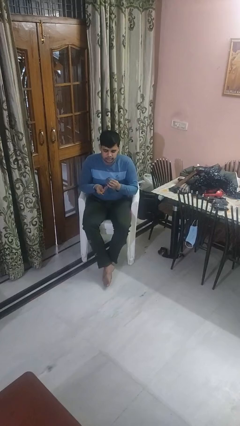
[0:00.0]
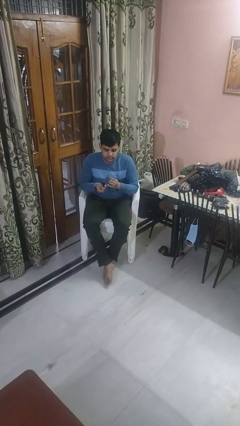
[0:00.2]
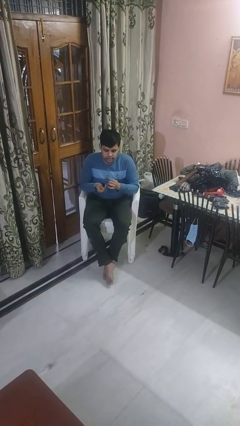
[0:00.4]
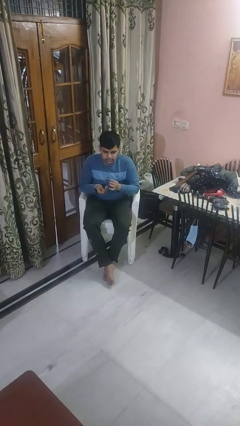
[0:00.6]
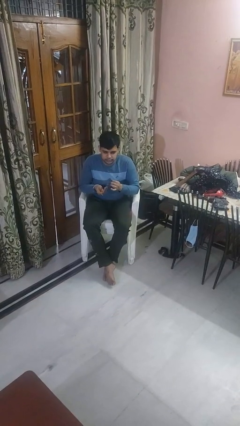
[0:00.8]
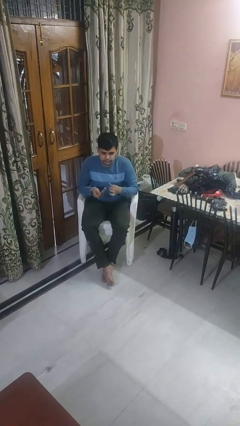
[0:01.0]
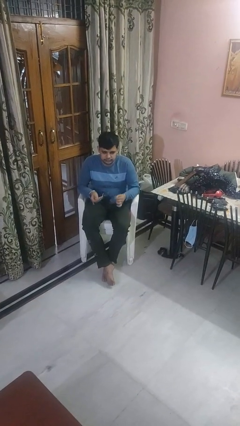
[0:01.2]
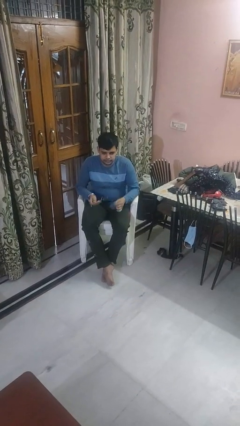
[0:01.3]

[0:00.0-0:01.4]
person cleans eyeglasses

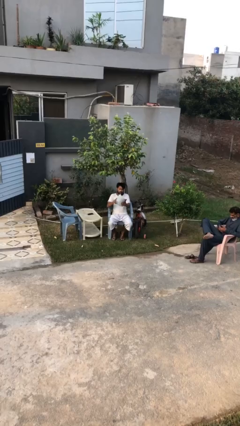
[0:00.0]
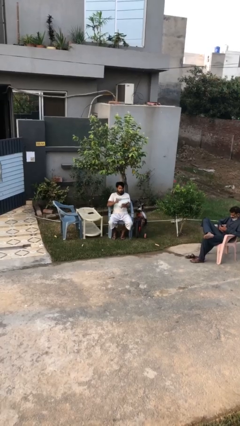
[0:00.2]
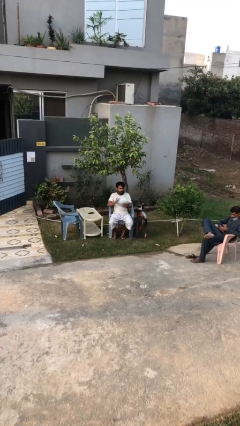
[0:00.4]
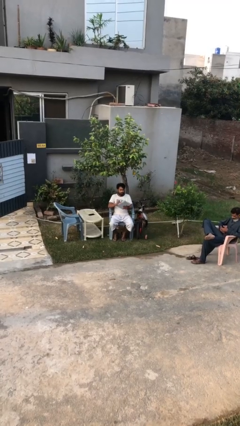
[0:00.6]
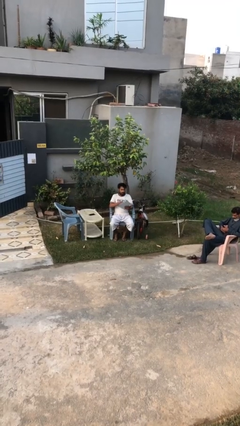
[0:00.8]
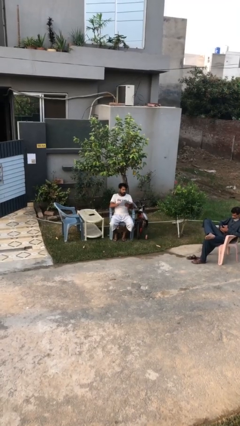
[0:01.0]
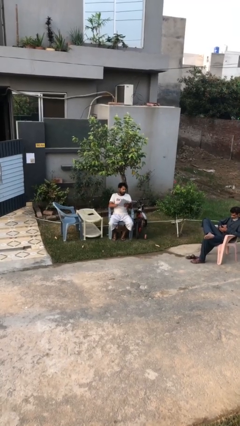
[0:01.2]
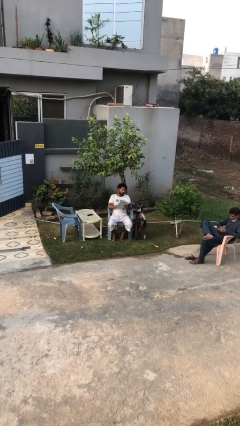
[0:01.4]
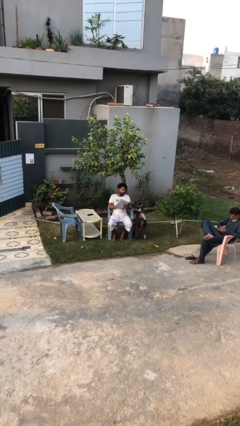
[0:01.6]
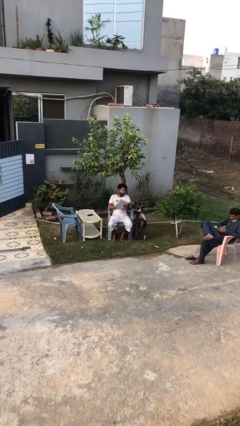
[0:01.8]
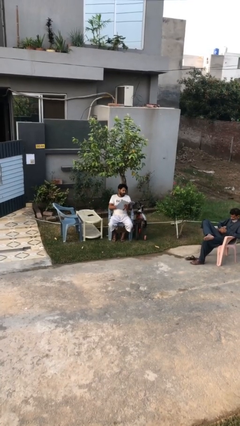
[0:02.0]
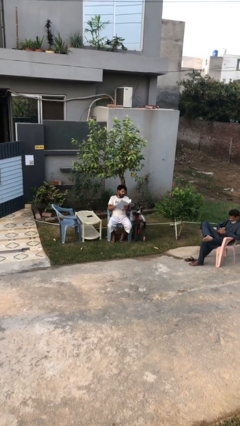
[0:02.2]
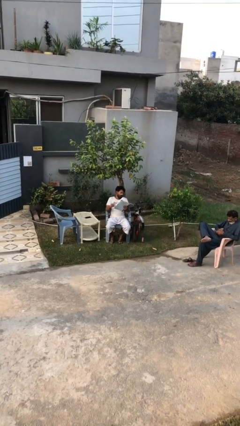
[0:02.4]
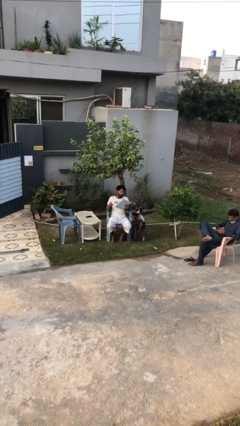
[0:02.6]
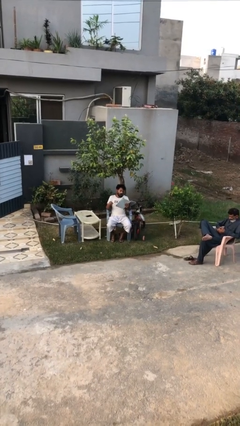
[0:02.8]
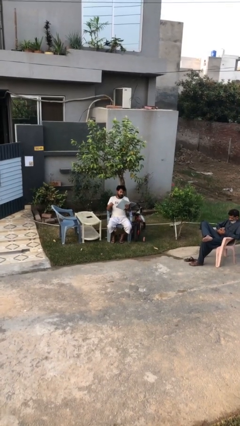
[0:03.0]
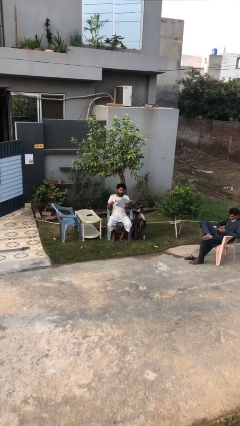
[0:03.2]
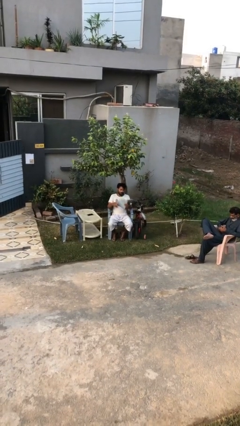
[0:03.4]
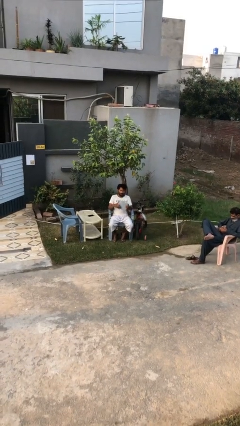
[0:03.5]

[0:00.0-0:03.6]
person reads document

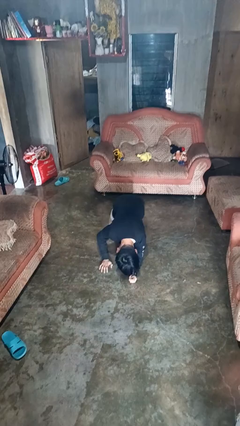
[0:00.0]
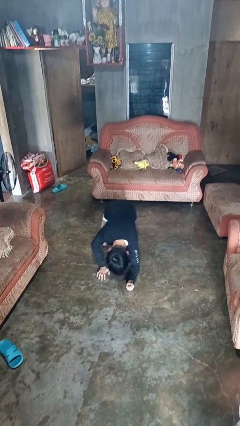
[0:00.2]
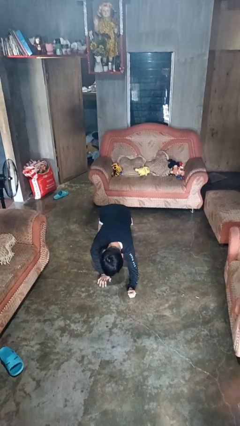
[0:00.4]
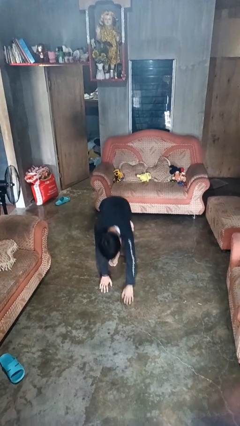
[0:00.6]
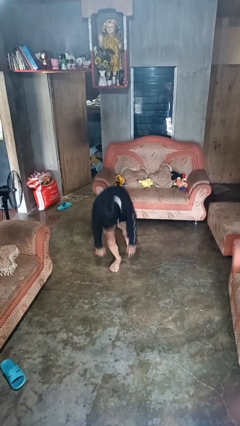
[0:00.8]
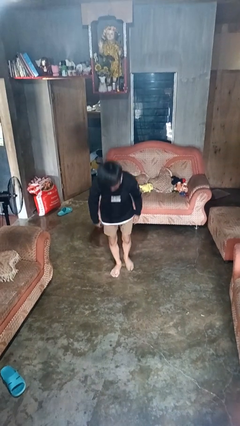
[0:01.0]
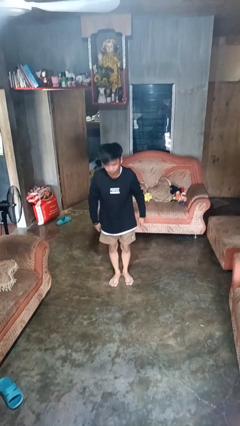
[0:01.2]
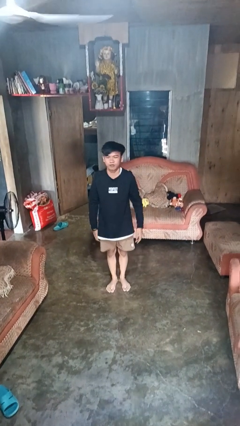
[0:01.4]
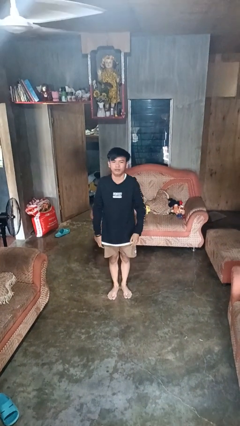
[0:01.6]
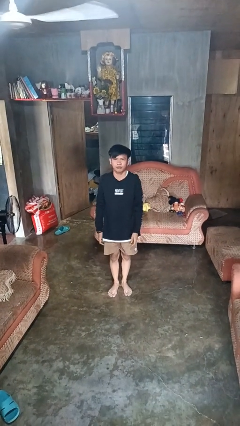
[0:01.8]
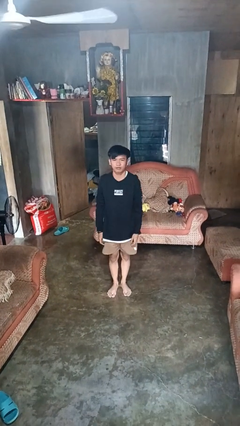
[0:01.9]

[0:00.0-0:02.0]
person stands up from floor

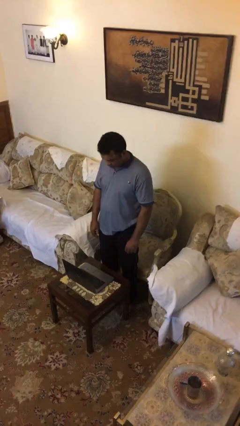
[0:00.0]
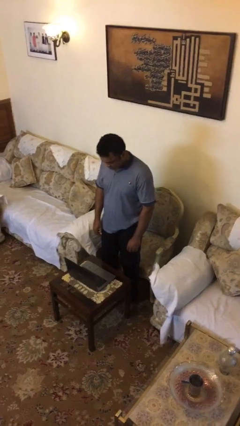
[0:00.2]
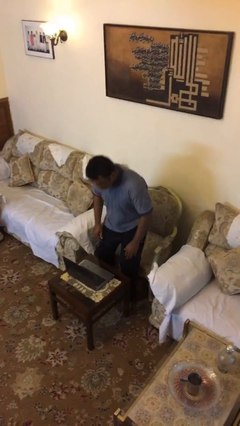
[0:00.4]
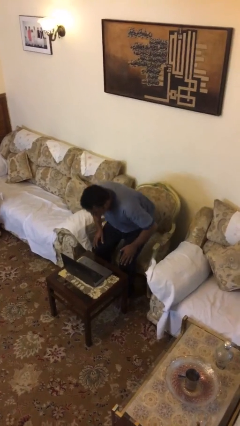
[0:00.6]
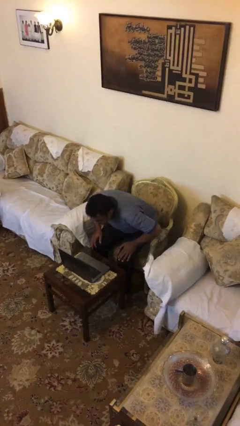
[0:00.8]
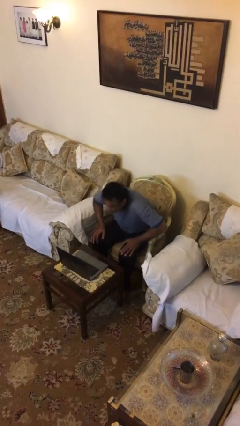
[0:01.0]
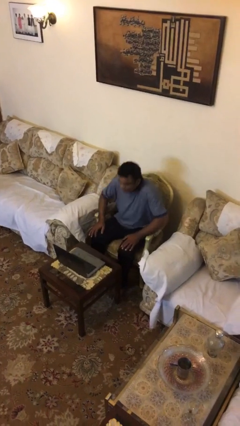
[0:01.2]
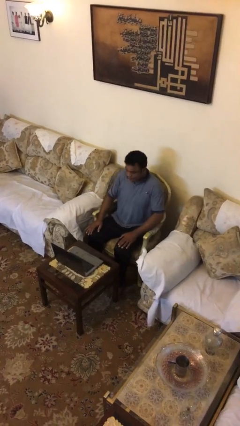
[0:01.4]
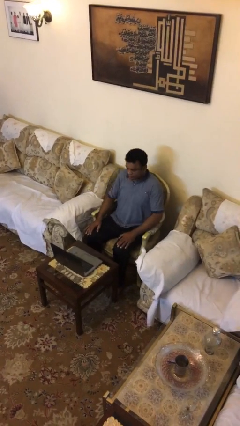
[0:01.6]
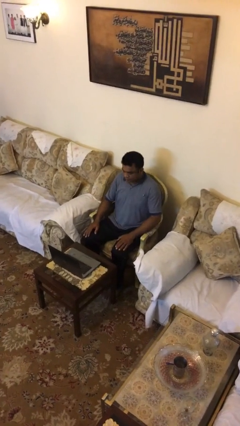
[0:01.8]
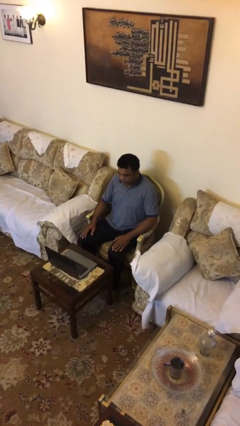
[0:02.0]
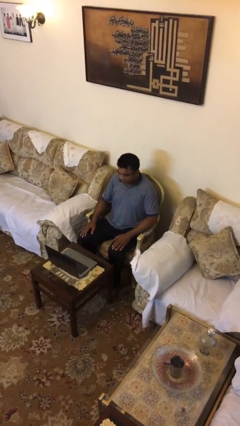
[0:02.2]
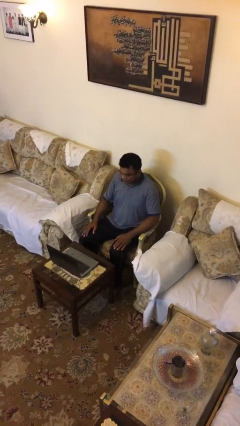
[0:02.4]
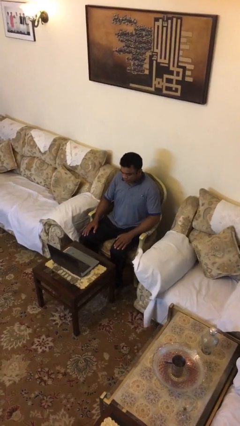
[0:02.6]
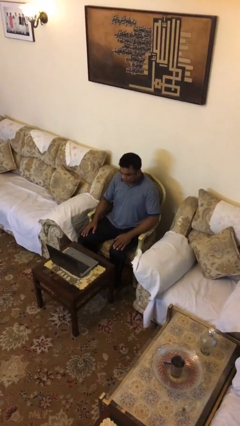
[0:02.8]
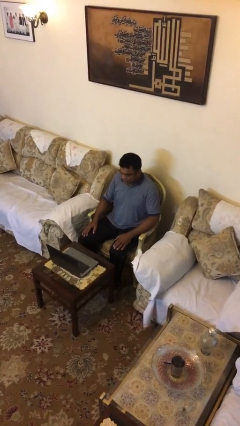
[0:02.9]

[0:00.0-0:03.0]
person sits down

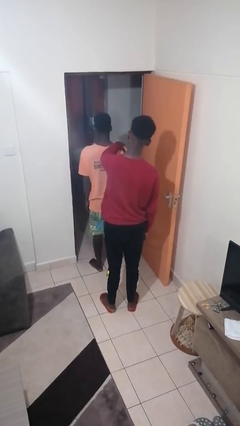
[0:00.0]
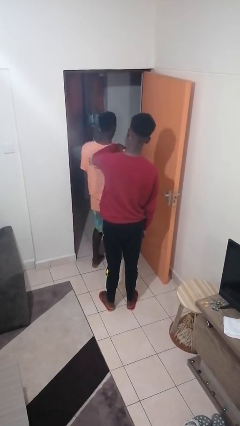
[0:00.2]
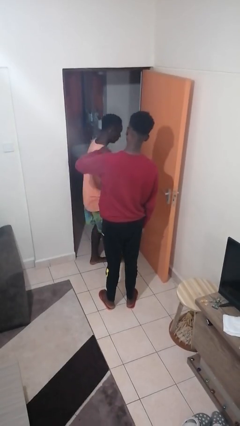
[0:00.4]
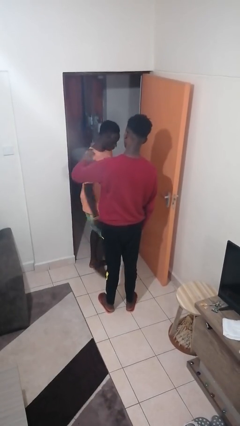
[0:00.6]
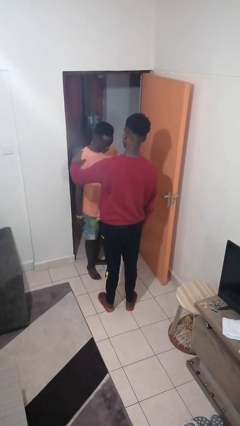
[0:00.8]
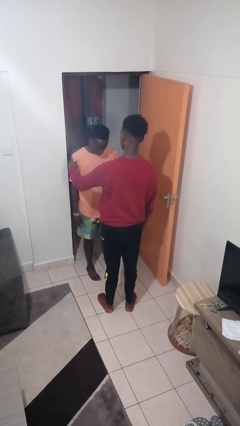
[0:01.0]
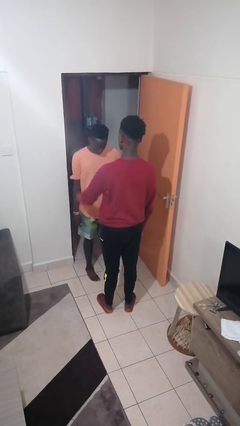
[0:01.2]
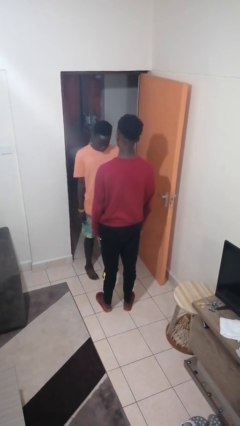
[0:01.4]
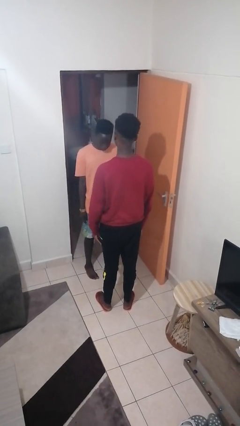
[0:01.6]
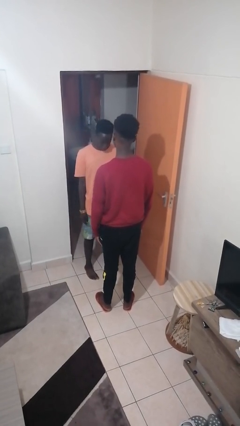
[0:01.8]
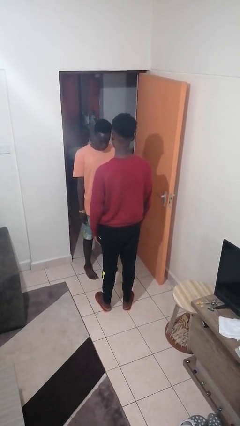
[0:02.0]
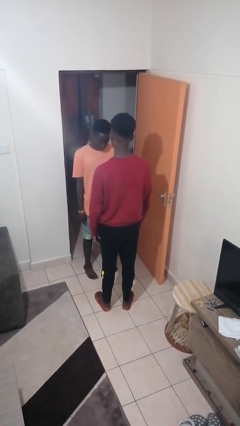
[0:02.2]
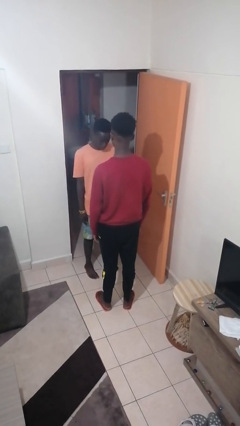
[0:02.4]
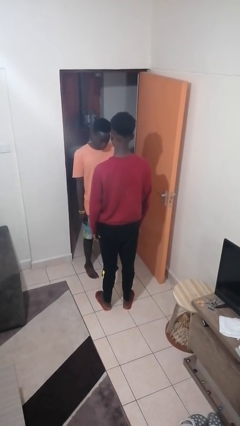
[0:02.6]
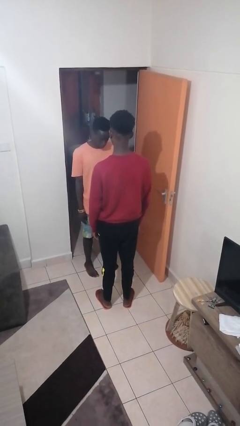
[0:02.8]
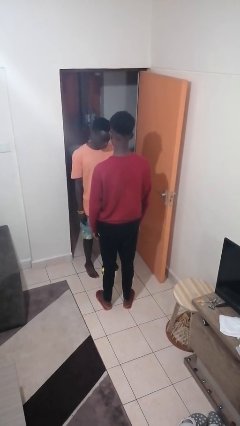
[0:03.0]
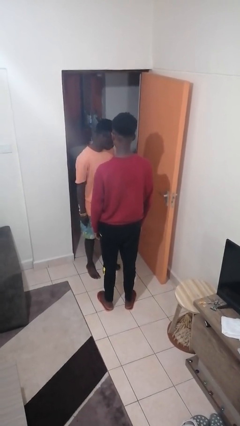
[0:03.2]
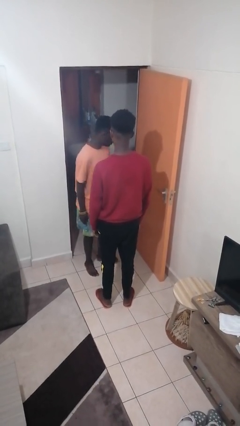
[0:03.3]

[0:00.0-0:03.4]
person spins person around

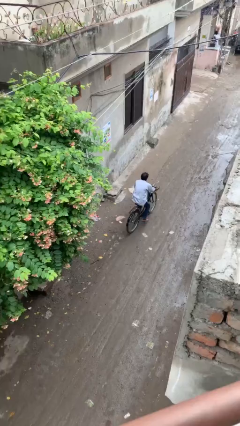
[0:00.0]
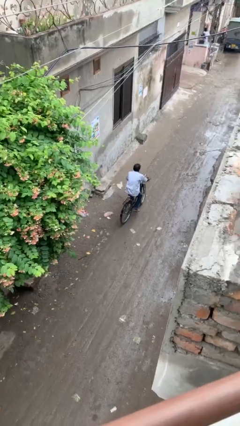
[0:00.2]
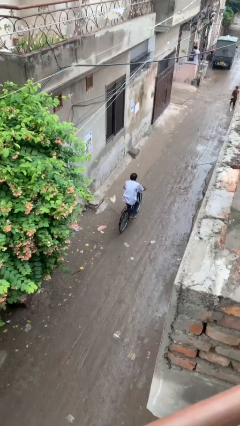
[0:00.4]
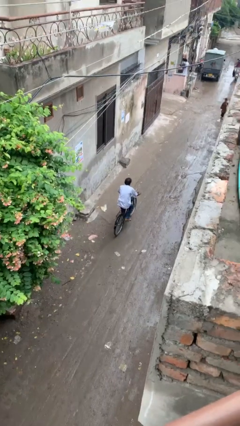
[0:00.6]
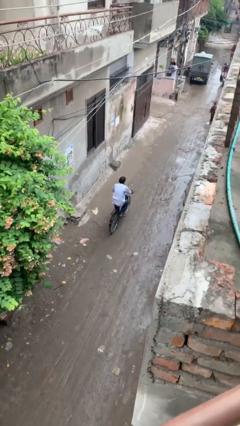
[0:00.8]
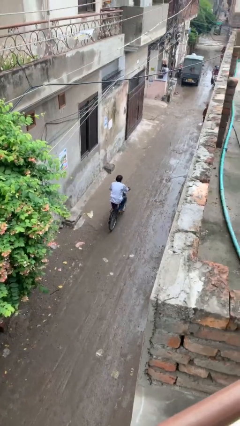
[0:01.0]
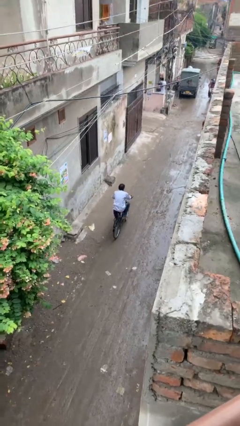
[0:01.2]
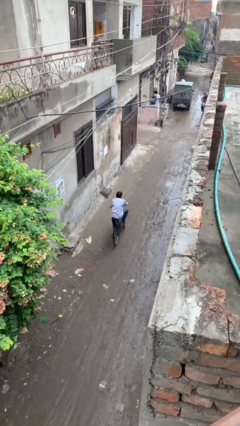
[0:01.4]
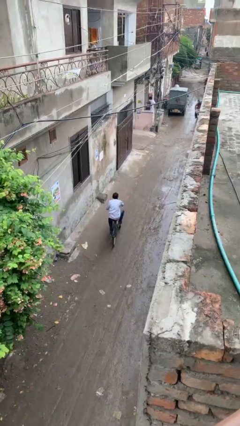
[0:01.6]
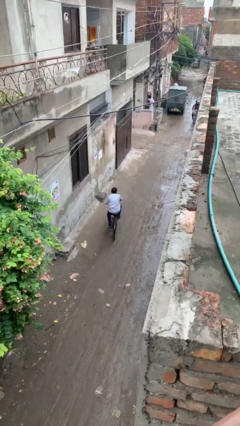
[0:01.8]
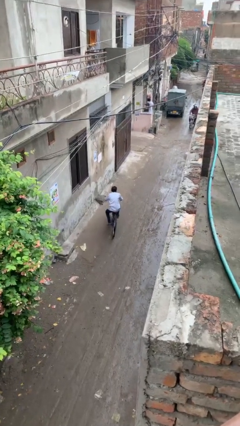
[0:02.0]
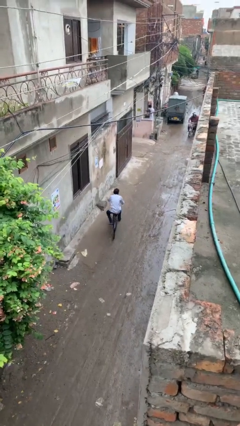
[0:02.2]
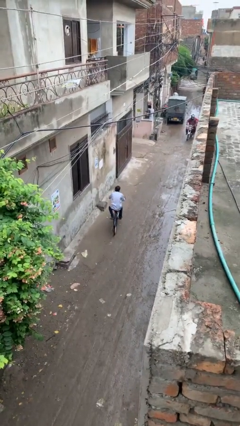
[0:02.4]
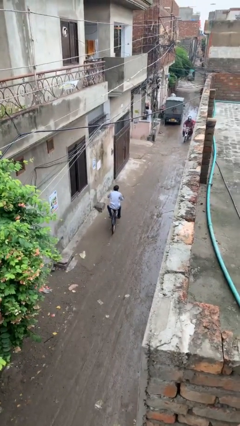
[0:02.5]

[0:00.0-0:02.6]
person rides bicycle

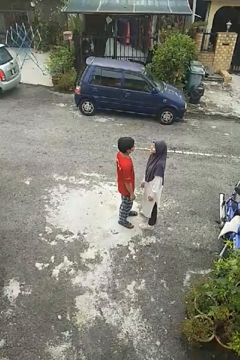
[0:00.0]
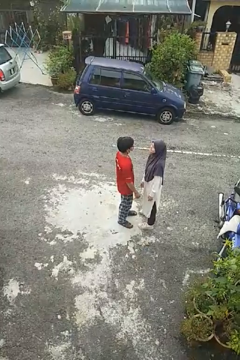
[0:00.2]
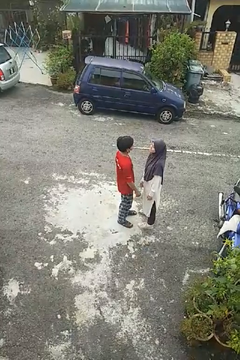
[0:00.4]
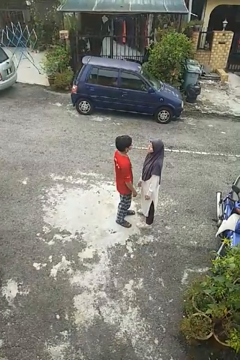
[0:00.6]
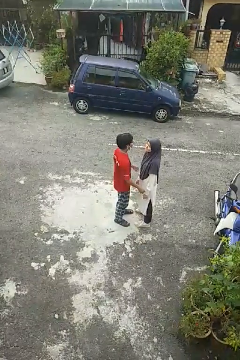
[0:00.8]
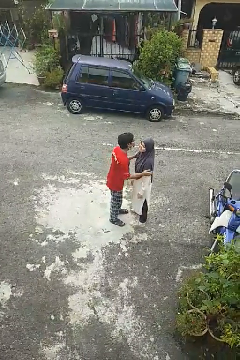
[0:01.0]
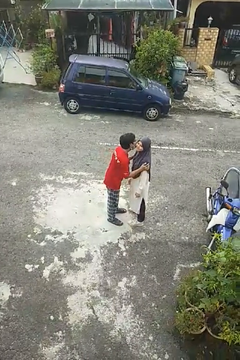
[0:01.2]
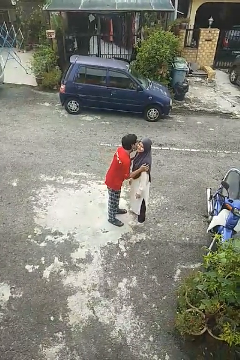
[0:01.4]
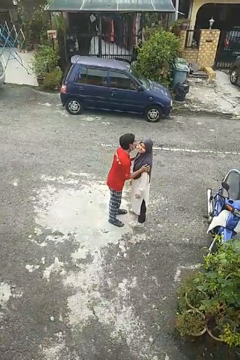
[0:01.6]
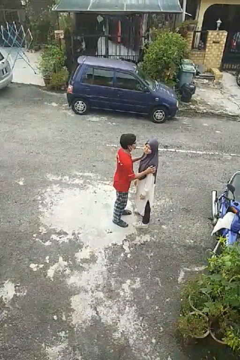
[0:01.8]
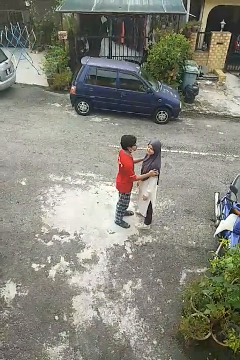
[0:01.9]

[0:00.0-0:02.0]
person kisses cheek of person
